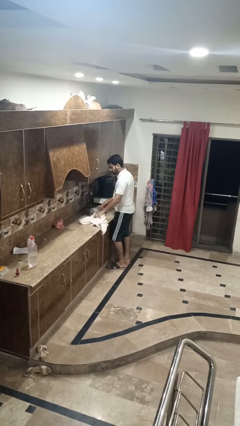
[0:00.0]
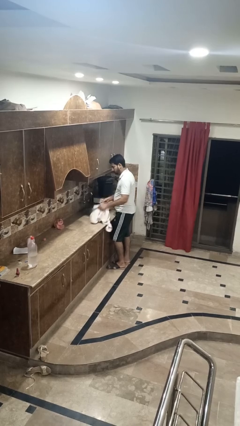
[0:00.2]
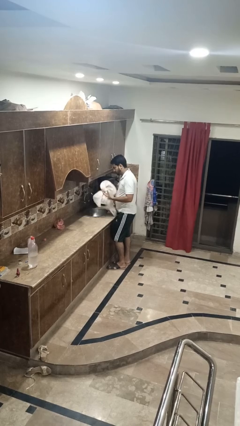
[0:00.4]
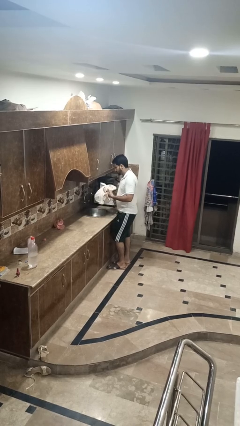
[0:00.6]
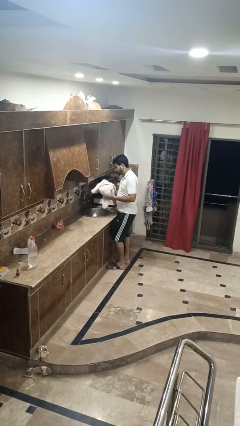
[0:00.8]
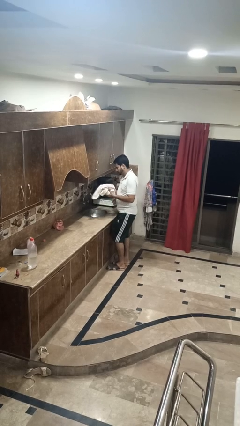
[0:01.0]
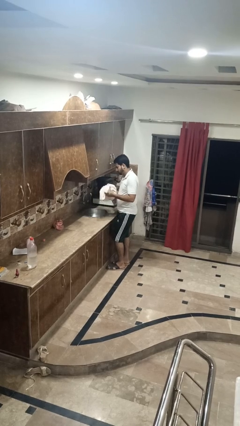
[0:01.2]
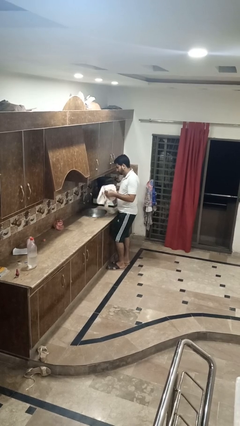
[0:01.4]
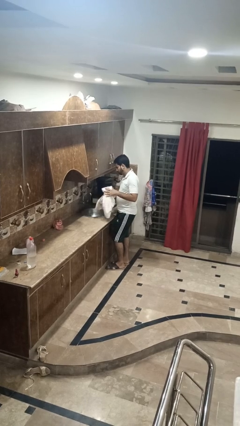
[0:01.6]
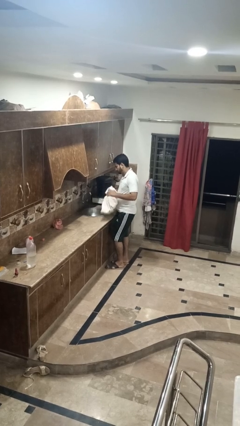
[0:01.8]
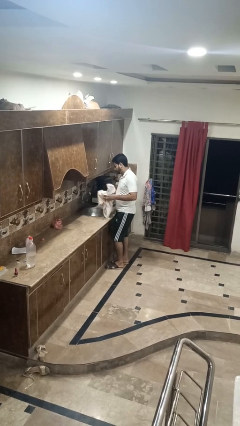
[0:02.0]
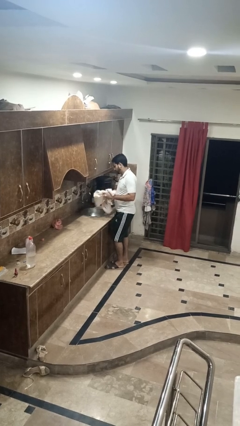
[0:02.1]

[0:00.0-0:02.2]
person dries hands with towel

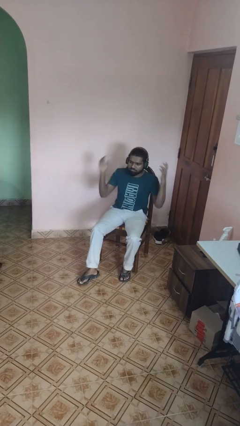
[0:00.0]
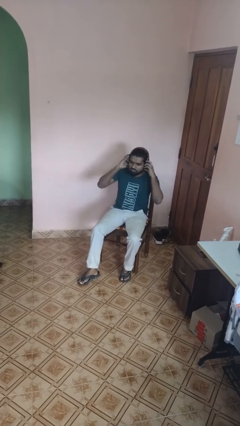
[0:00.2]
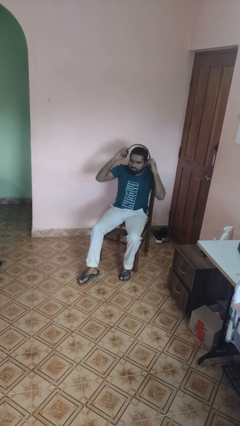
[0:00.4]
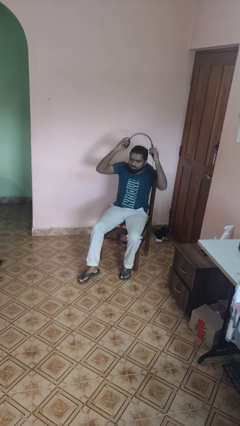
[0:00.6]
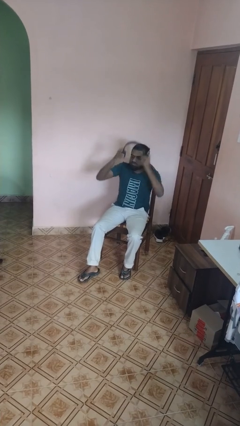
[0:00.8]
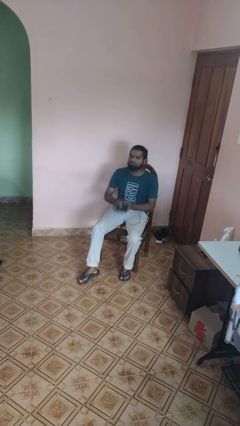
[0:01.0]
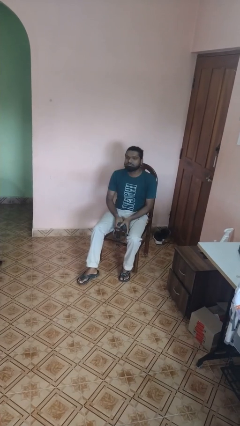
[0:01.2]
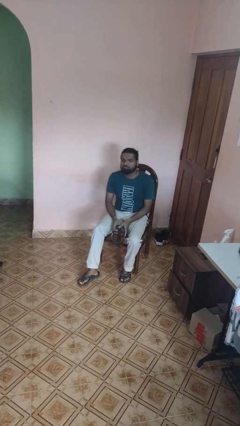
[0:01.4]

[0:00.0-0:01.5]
person takes off headphones

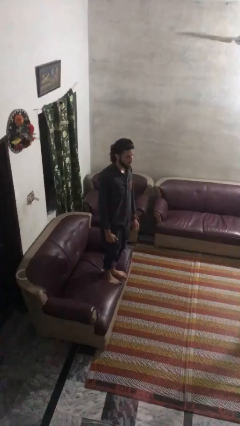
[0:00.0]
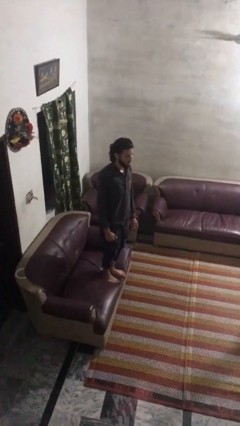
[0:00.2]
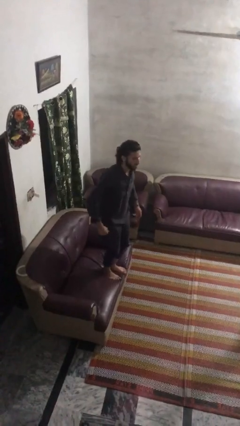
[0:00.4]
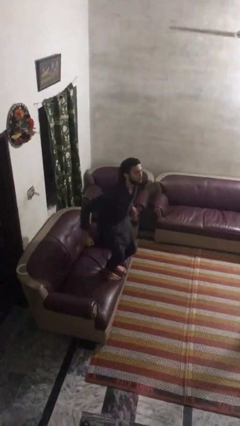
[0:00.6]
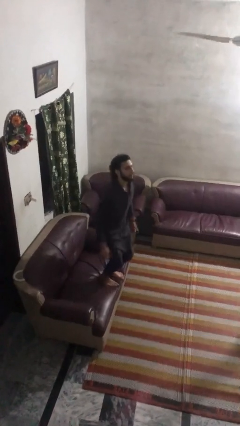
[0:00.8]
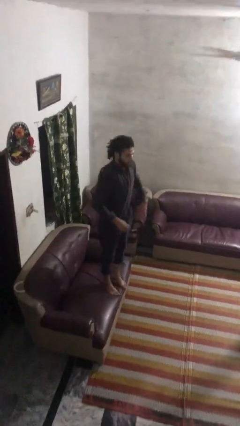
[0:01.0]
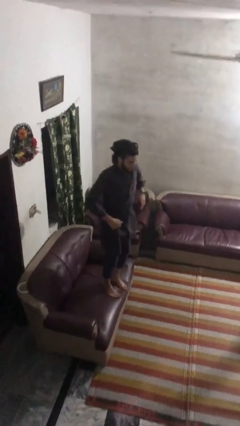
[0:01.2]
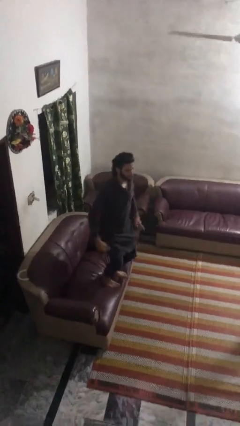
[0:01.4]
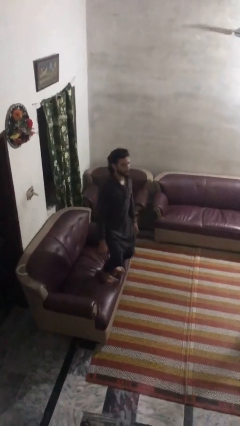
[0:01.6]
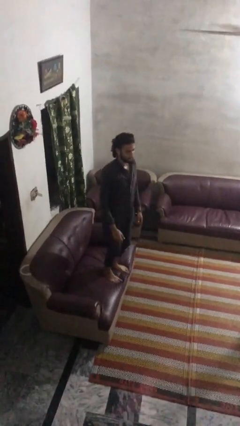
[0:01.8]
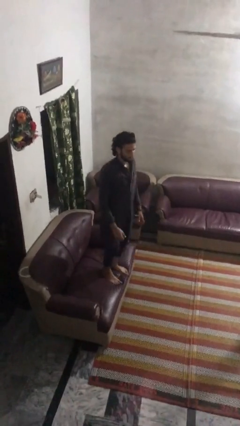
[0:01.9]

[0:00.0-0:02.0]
person jumps on couch

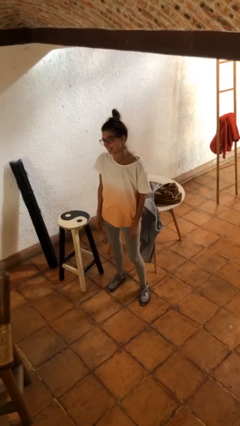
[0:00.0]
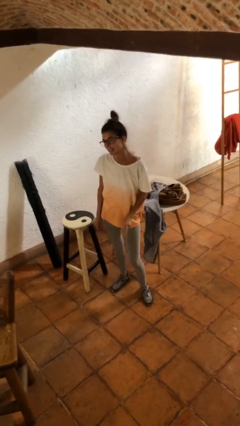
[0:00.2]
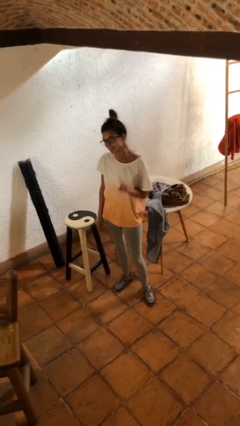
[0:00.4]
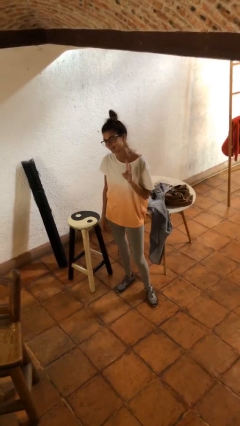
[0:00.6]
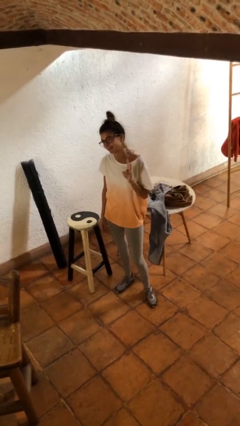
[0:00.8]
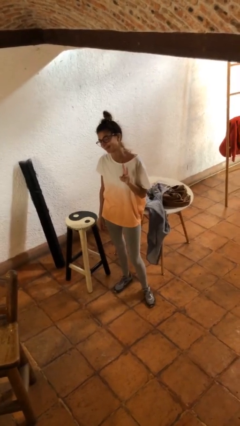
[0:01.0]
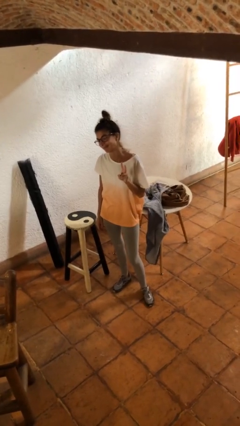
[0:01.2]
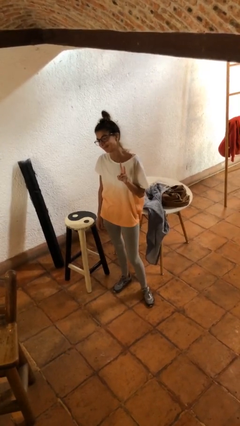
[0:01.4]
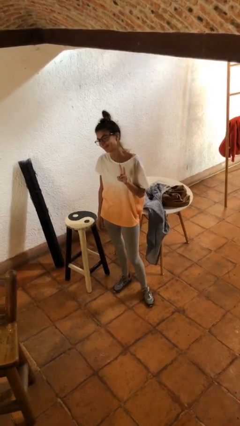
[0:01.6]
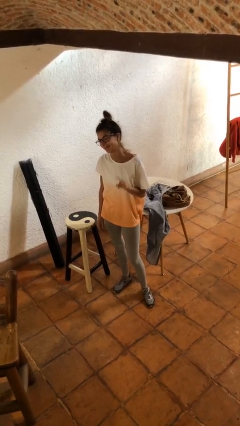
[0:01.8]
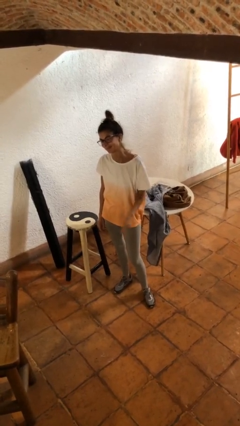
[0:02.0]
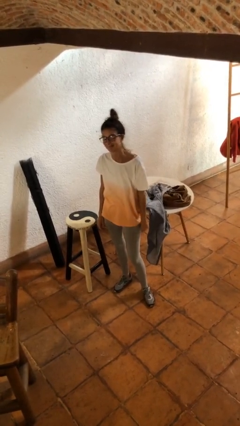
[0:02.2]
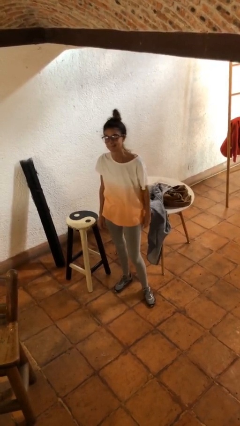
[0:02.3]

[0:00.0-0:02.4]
person gestures peace

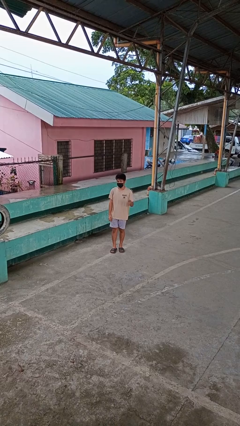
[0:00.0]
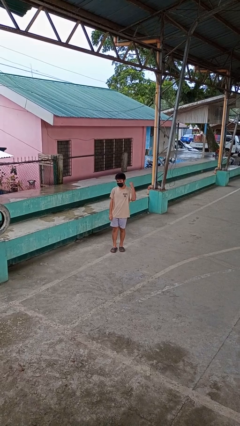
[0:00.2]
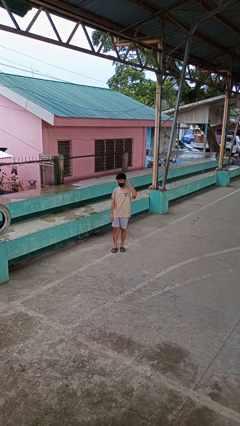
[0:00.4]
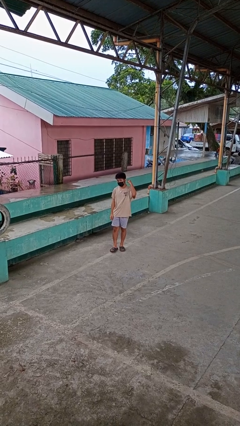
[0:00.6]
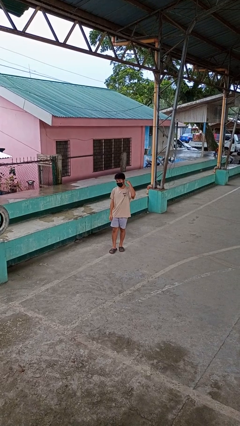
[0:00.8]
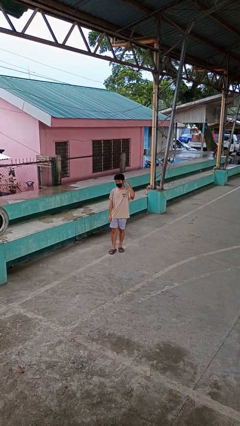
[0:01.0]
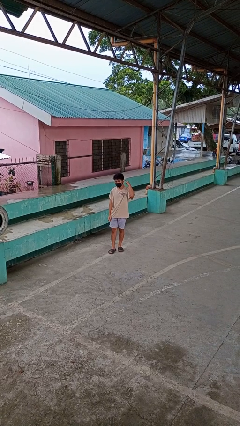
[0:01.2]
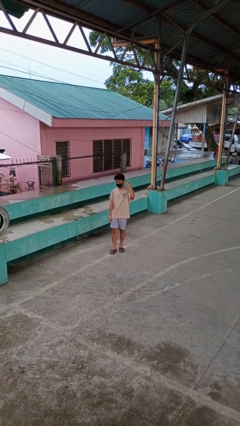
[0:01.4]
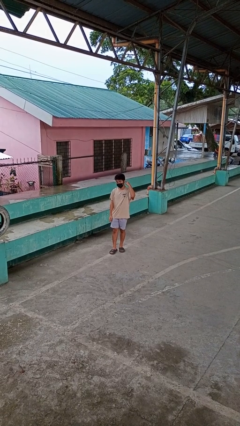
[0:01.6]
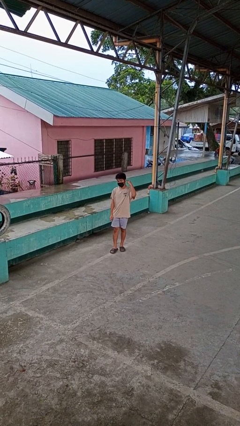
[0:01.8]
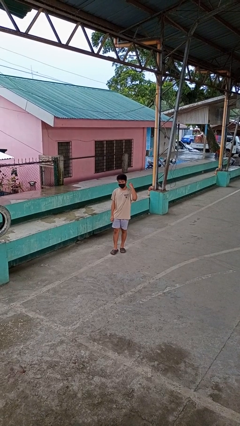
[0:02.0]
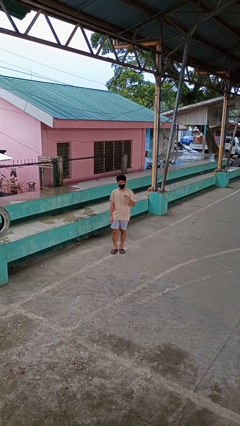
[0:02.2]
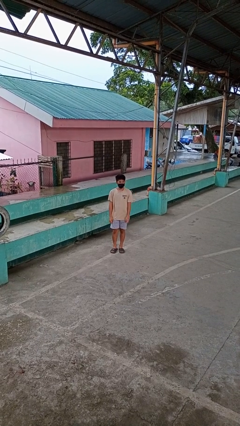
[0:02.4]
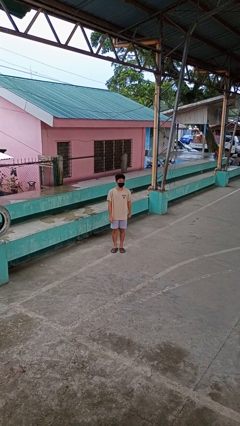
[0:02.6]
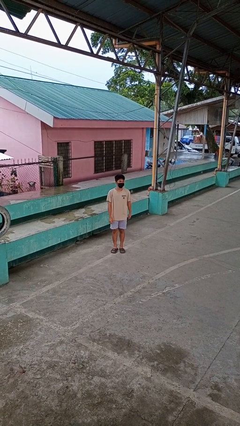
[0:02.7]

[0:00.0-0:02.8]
person gestures listen closely

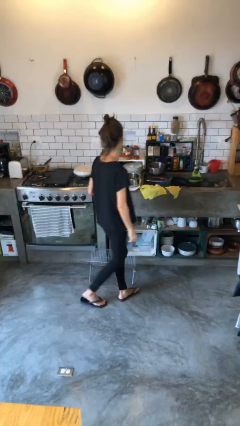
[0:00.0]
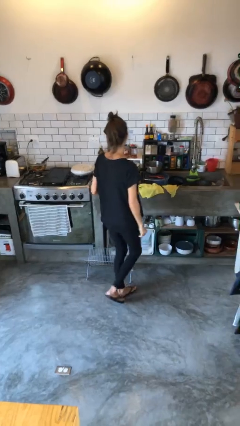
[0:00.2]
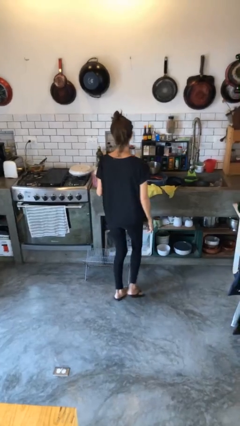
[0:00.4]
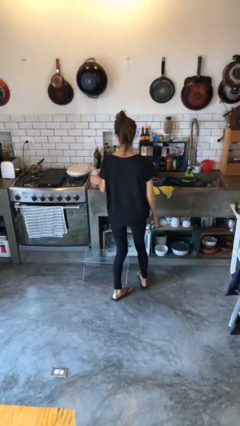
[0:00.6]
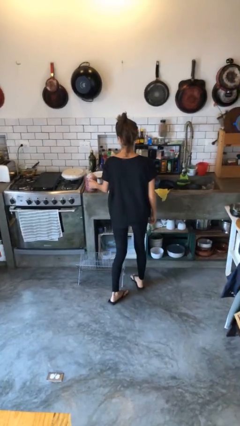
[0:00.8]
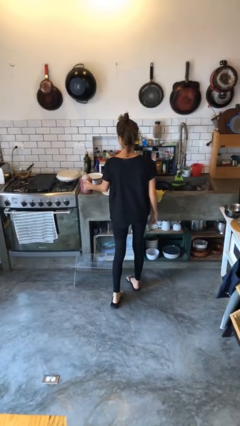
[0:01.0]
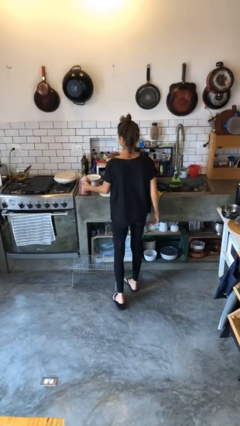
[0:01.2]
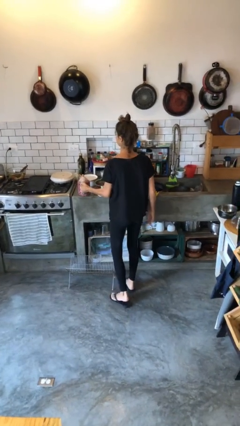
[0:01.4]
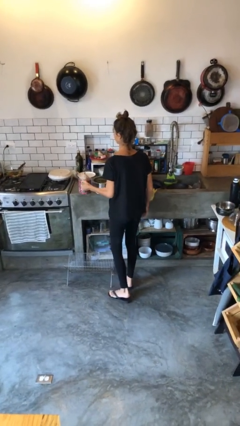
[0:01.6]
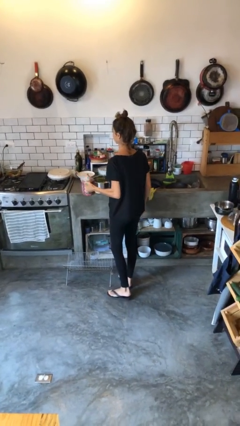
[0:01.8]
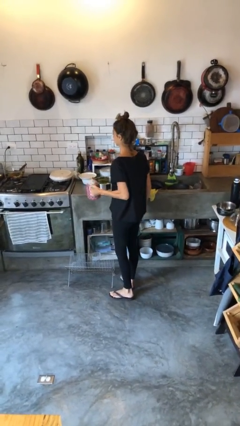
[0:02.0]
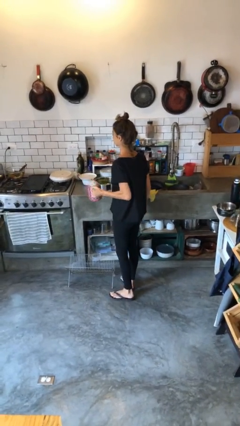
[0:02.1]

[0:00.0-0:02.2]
person picks up object from countertop

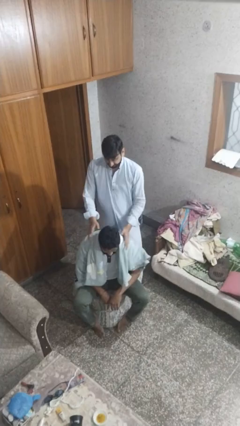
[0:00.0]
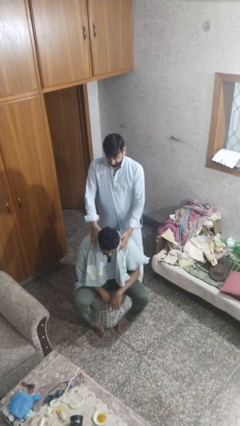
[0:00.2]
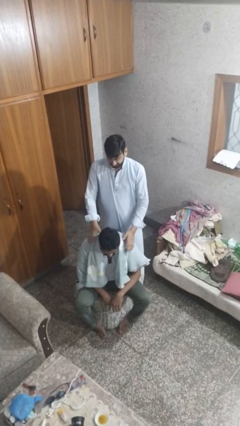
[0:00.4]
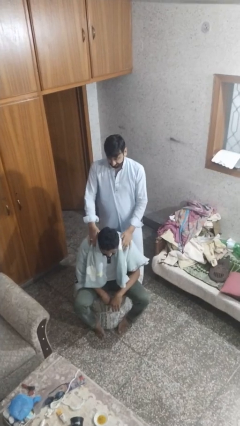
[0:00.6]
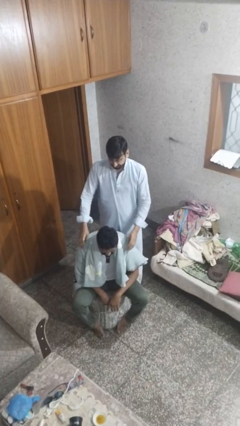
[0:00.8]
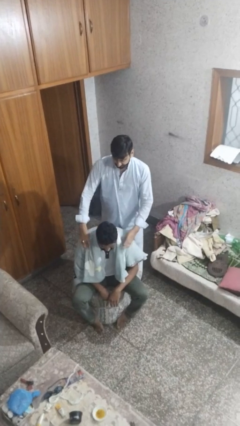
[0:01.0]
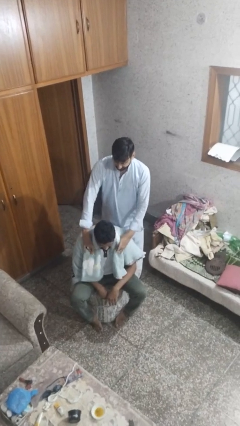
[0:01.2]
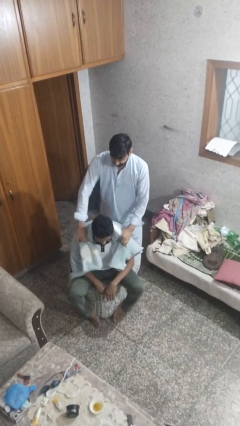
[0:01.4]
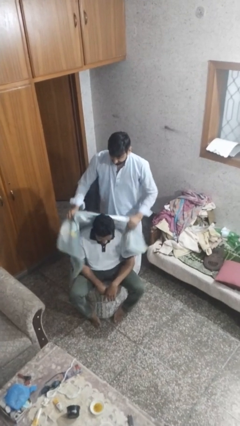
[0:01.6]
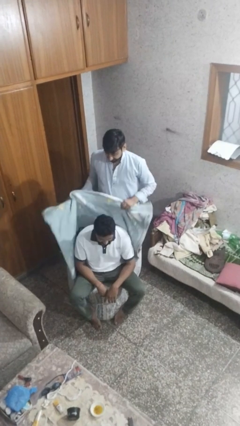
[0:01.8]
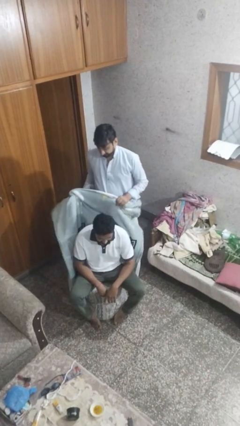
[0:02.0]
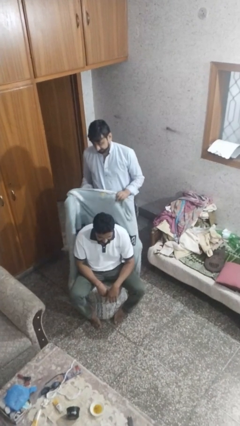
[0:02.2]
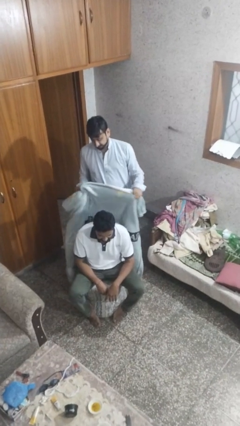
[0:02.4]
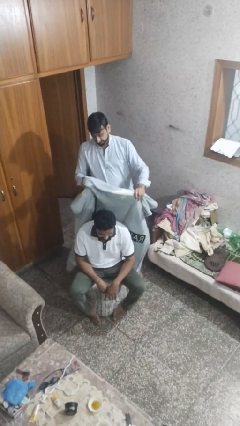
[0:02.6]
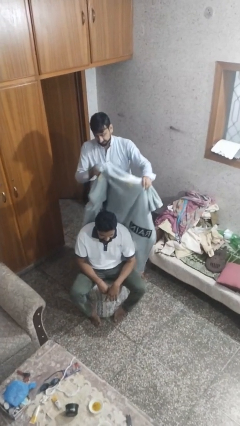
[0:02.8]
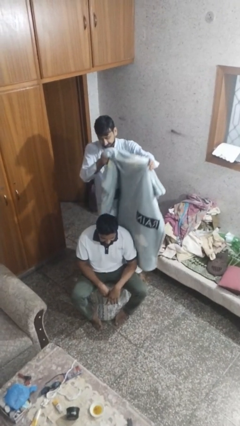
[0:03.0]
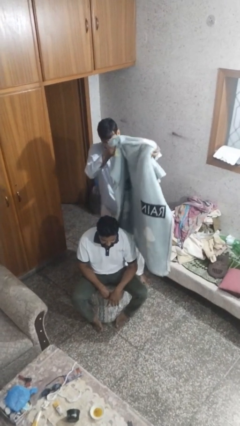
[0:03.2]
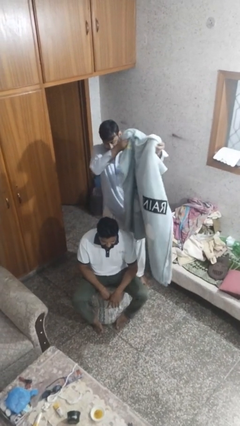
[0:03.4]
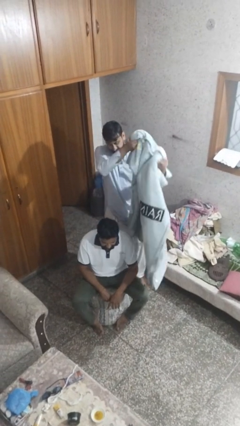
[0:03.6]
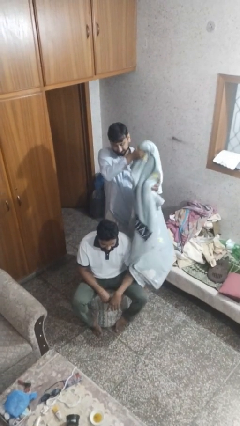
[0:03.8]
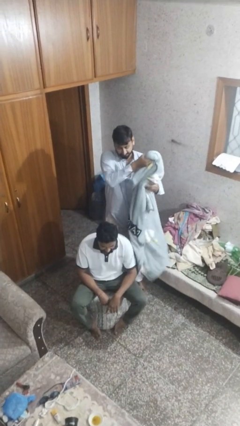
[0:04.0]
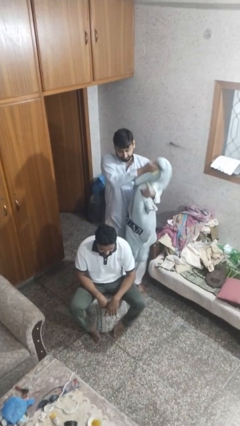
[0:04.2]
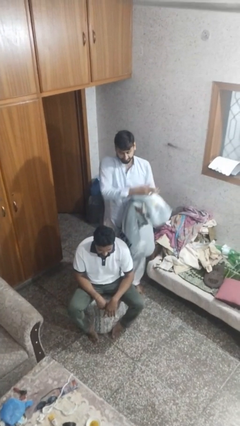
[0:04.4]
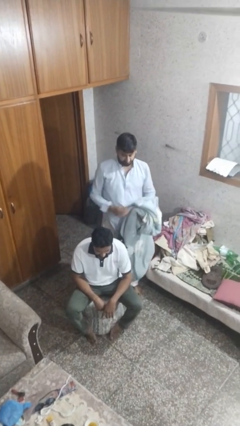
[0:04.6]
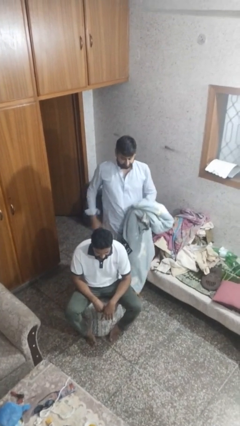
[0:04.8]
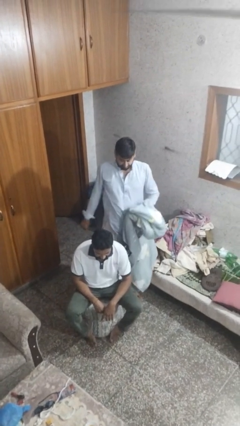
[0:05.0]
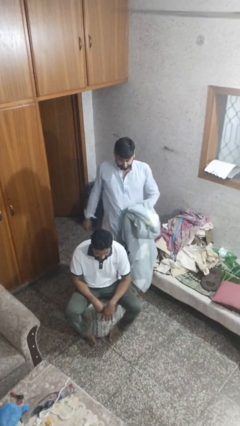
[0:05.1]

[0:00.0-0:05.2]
person uncovers friend with blanket
